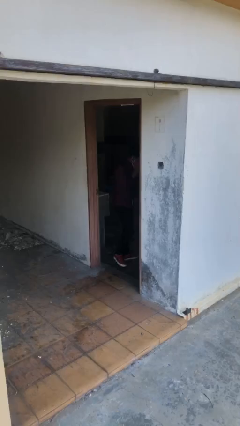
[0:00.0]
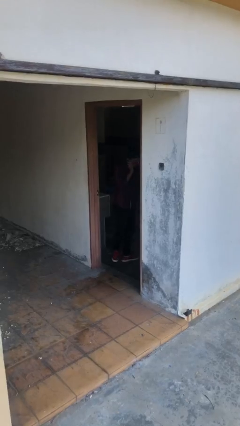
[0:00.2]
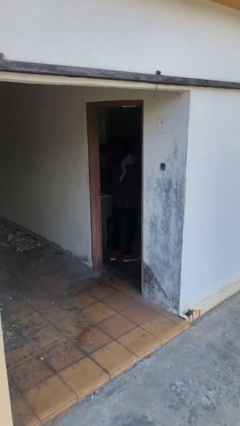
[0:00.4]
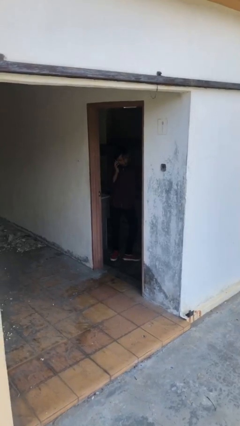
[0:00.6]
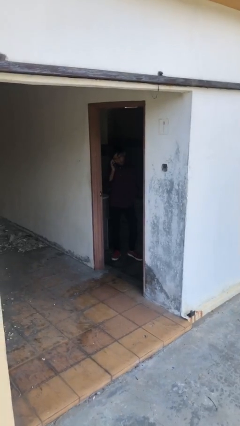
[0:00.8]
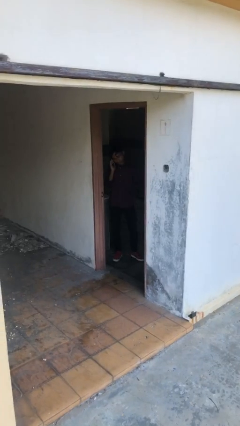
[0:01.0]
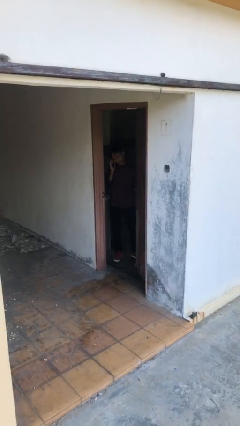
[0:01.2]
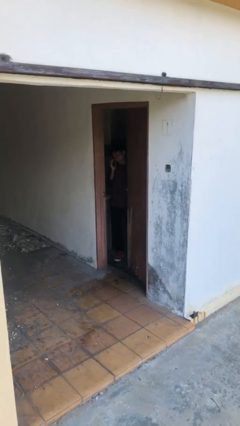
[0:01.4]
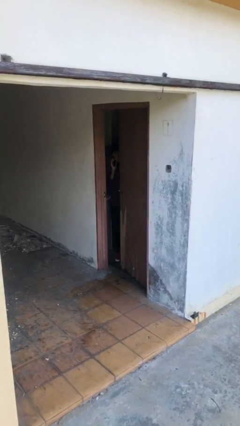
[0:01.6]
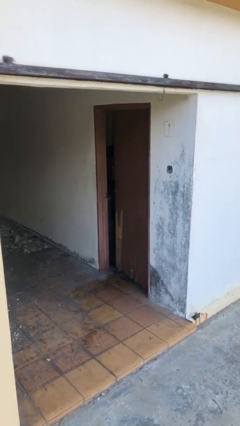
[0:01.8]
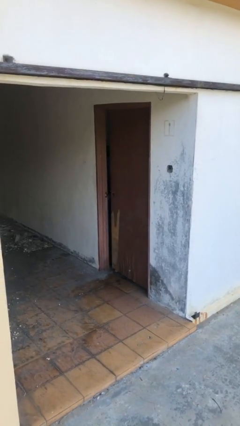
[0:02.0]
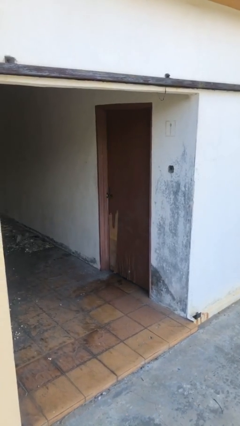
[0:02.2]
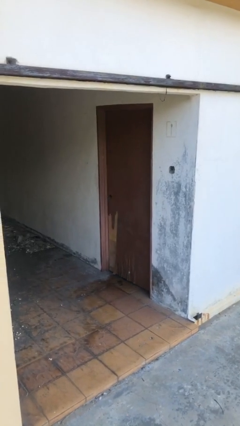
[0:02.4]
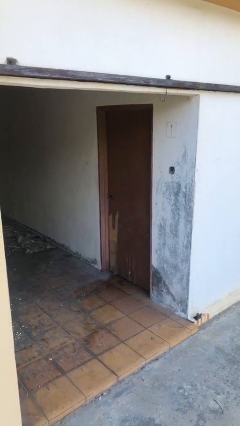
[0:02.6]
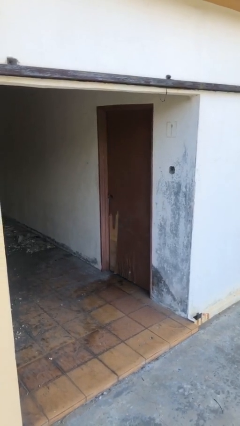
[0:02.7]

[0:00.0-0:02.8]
person closes facility door

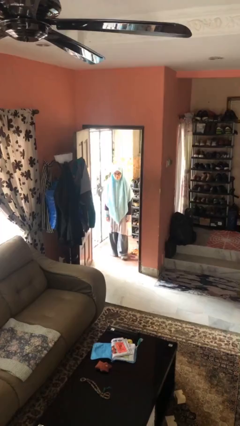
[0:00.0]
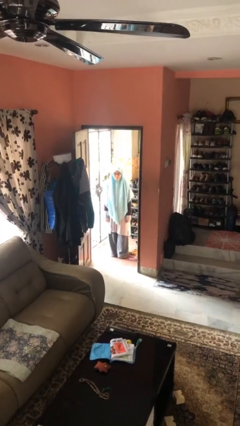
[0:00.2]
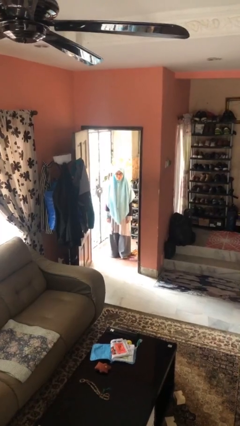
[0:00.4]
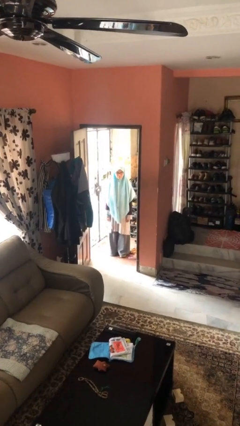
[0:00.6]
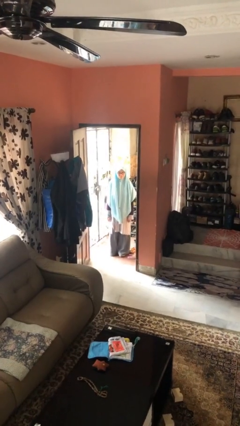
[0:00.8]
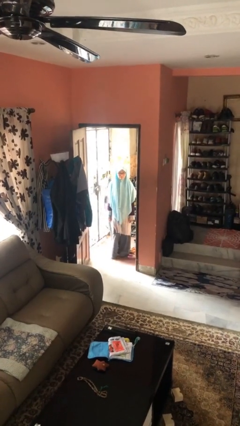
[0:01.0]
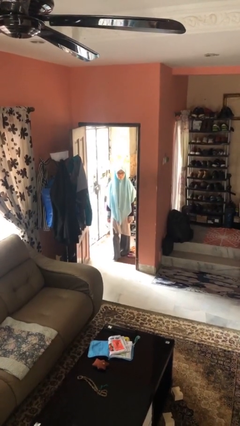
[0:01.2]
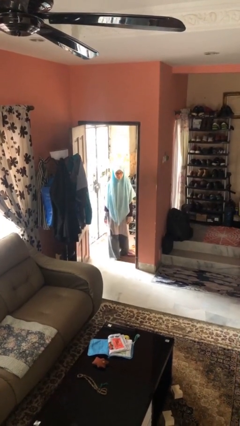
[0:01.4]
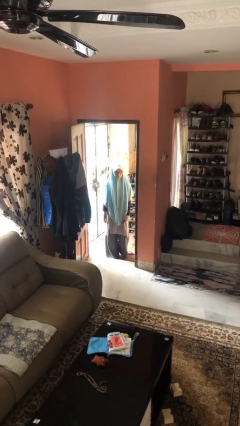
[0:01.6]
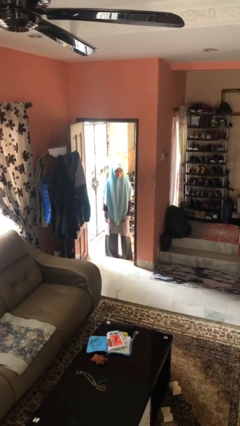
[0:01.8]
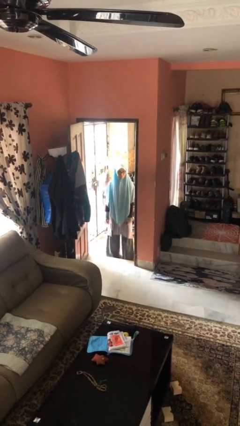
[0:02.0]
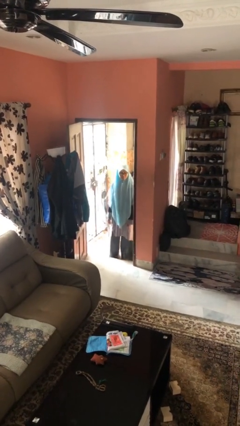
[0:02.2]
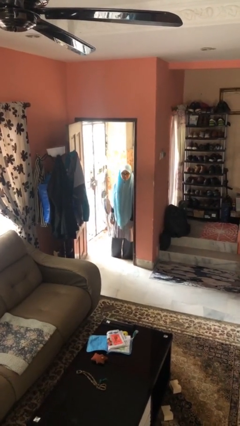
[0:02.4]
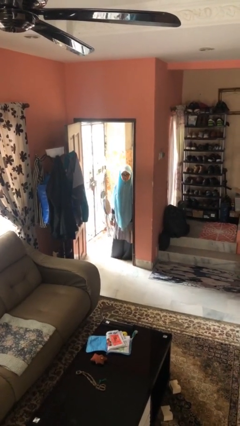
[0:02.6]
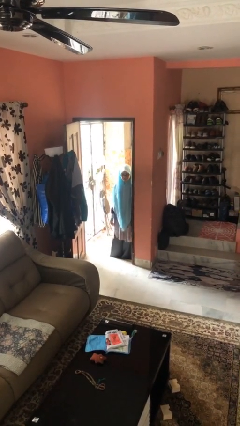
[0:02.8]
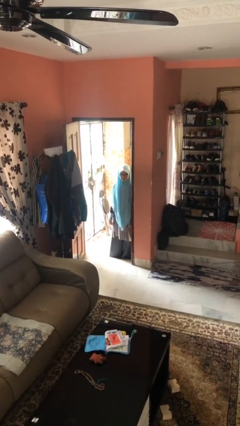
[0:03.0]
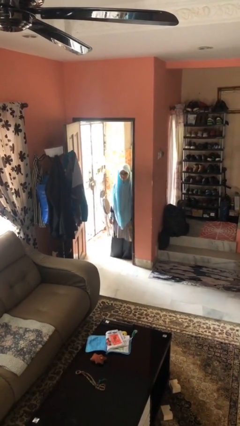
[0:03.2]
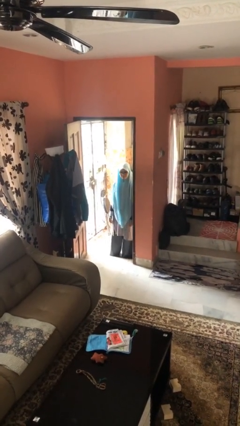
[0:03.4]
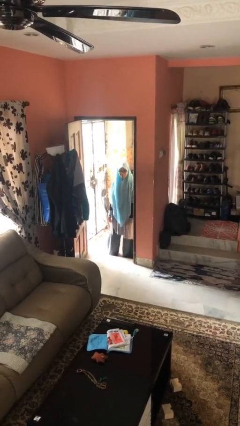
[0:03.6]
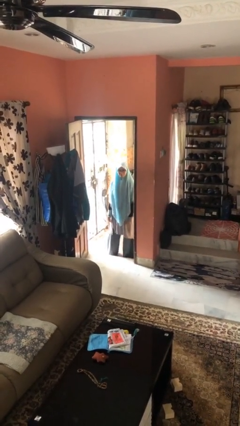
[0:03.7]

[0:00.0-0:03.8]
person bumps into wall

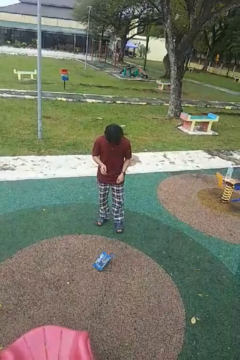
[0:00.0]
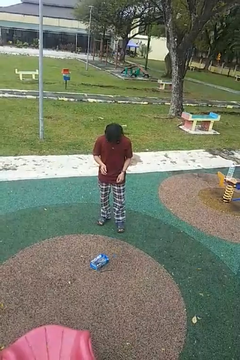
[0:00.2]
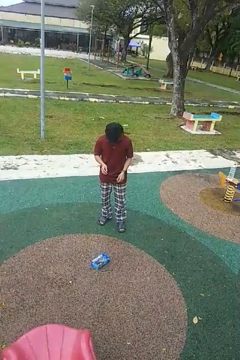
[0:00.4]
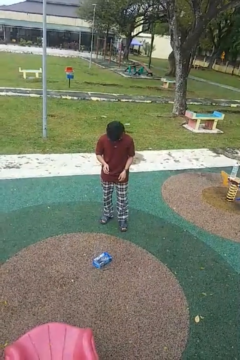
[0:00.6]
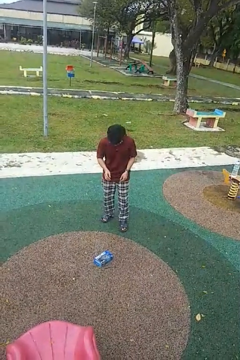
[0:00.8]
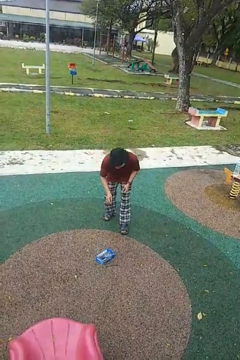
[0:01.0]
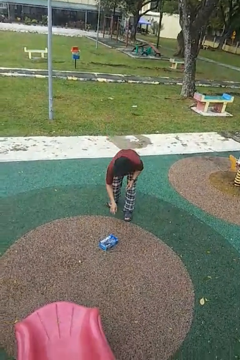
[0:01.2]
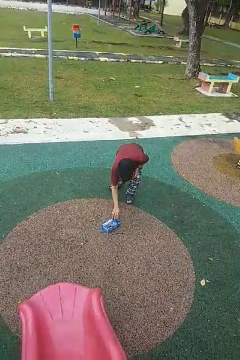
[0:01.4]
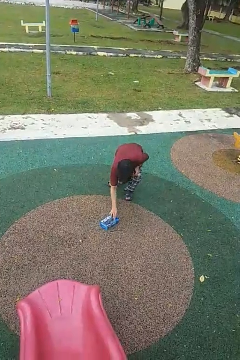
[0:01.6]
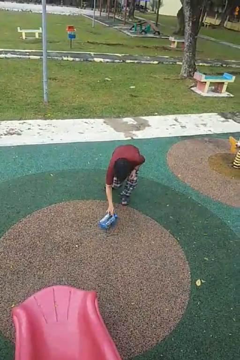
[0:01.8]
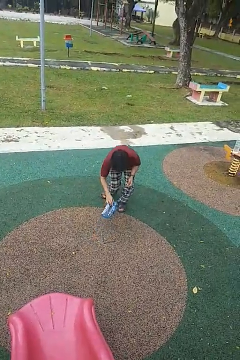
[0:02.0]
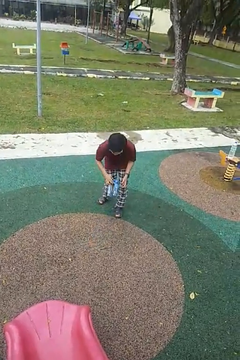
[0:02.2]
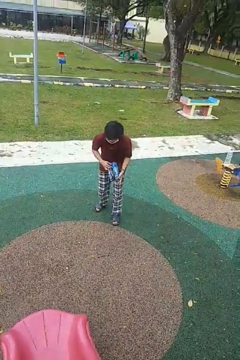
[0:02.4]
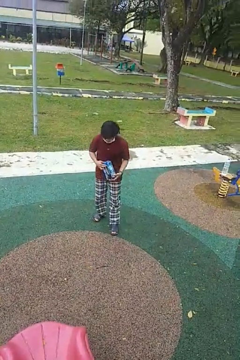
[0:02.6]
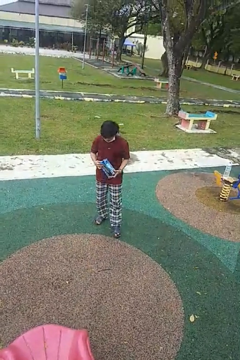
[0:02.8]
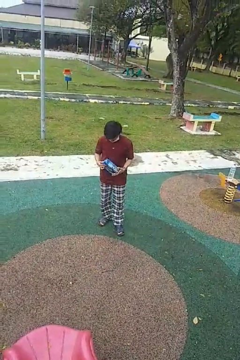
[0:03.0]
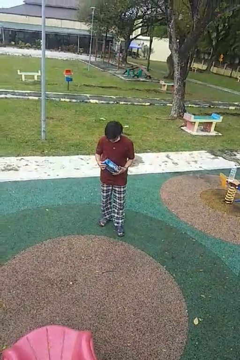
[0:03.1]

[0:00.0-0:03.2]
person picks up object from floor

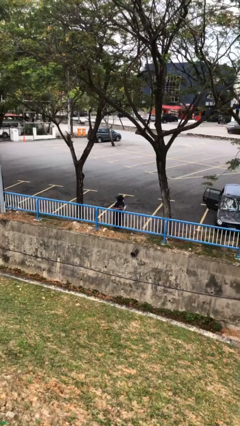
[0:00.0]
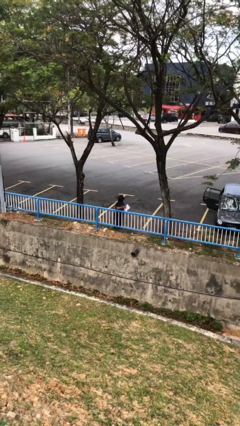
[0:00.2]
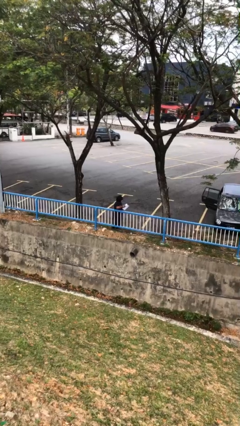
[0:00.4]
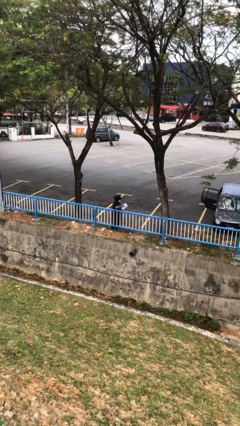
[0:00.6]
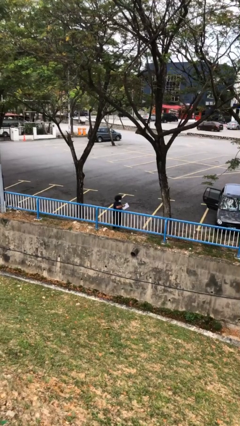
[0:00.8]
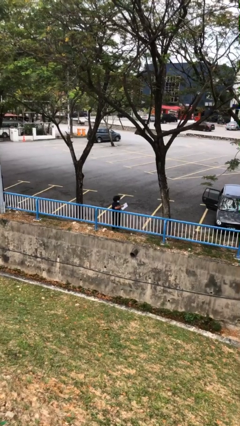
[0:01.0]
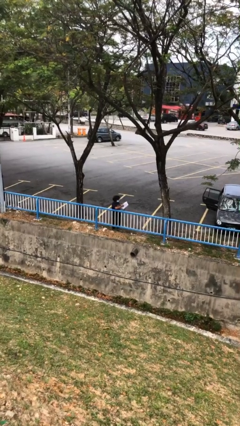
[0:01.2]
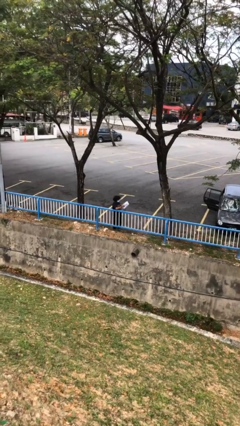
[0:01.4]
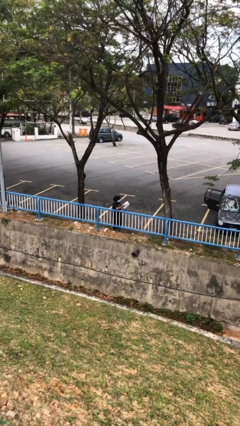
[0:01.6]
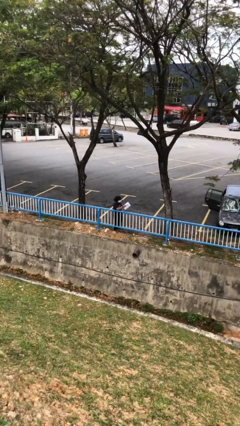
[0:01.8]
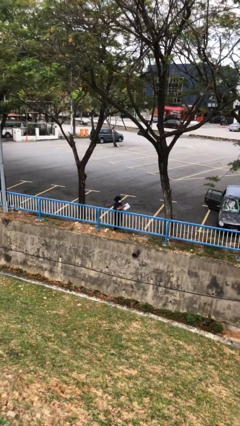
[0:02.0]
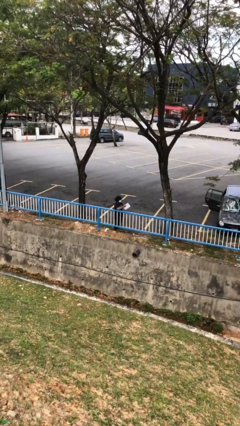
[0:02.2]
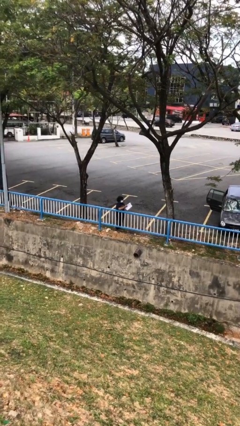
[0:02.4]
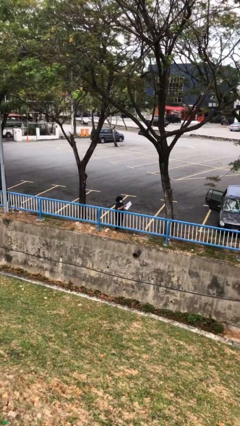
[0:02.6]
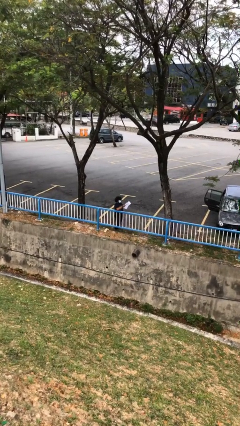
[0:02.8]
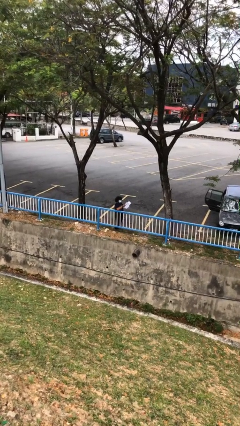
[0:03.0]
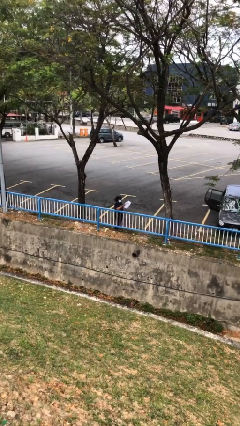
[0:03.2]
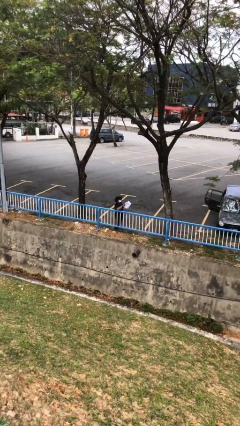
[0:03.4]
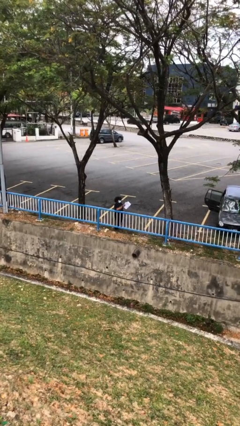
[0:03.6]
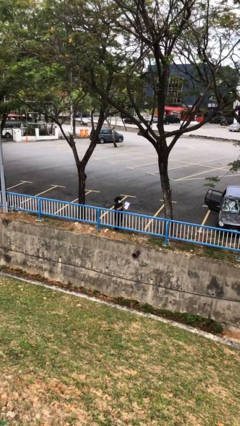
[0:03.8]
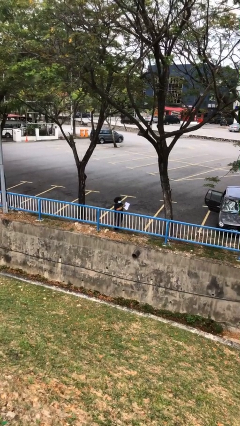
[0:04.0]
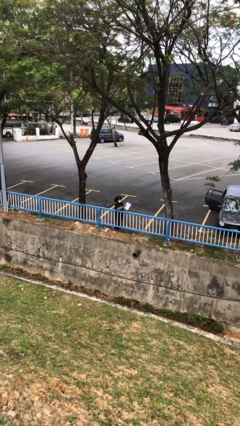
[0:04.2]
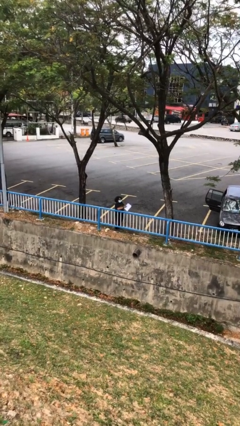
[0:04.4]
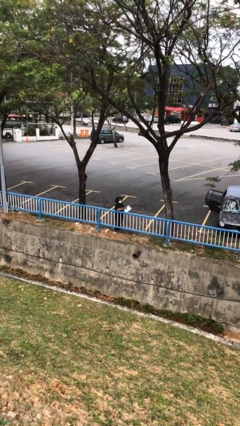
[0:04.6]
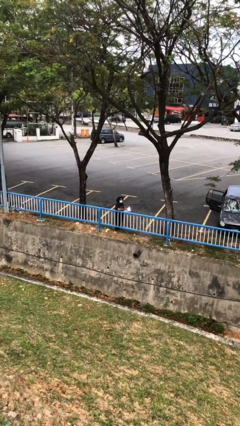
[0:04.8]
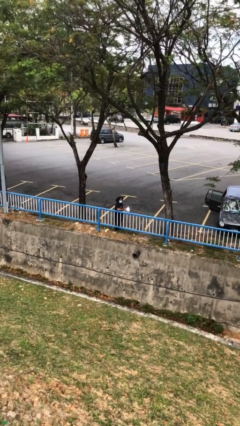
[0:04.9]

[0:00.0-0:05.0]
person reads document

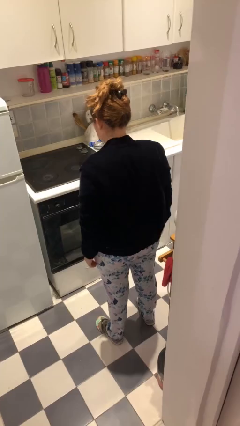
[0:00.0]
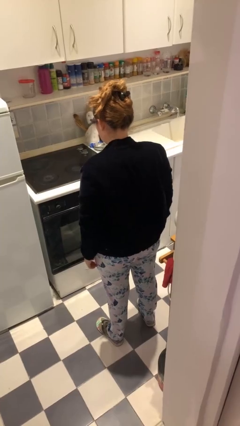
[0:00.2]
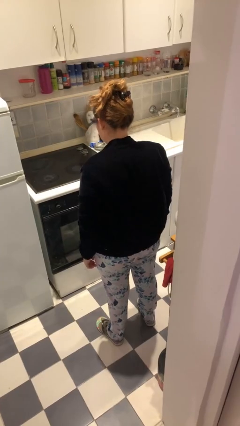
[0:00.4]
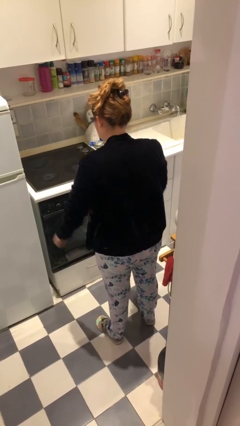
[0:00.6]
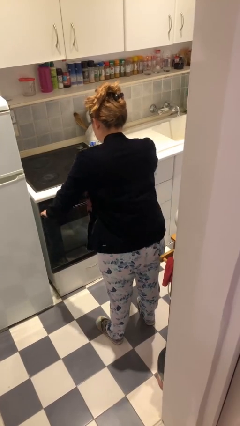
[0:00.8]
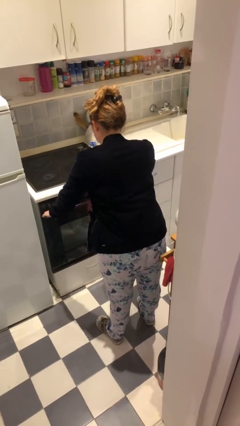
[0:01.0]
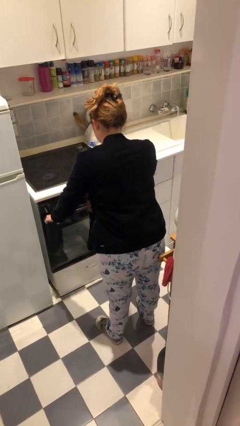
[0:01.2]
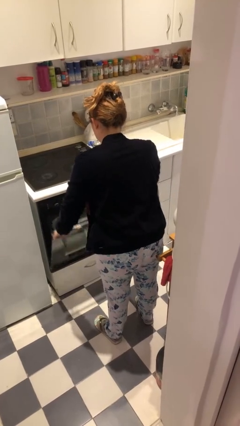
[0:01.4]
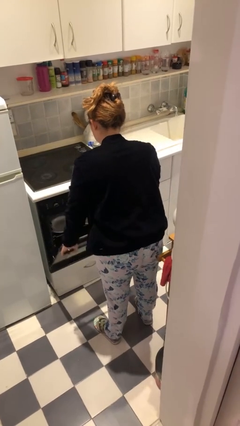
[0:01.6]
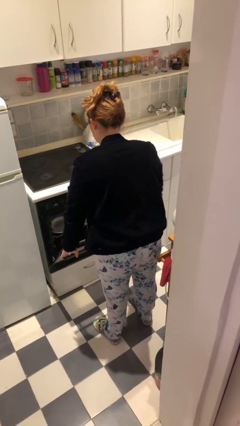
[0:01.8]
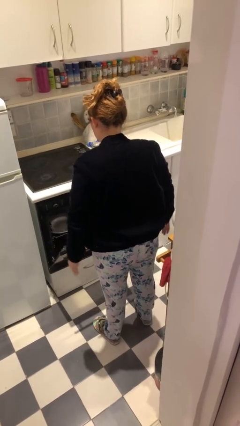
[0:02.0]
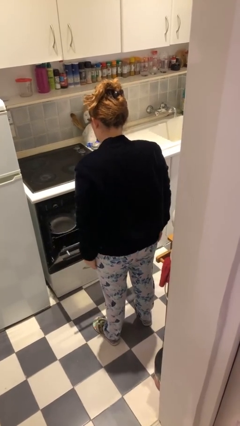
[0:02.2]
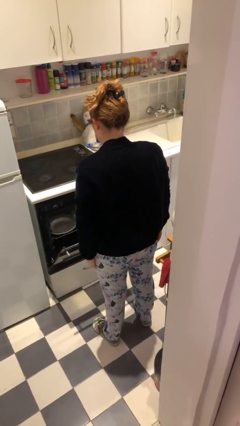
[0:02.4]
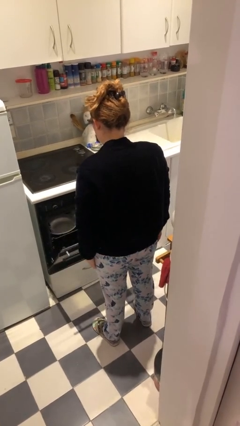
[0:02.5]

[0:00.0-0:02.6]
person opens dishwasher

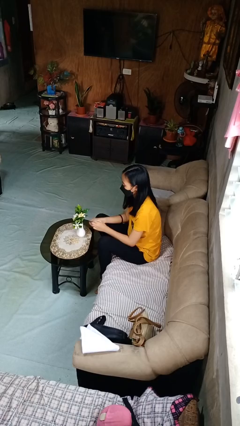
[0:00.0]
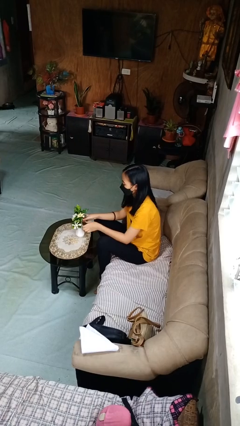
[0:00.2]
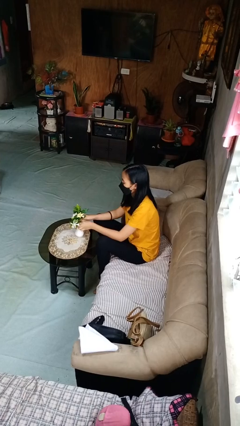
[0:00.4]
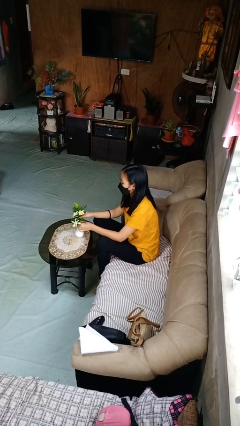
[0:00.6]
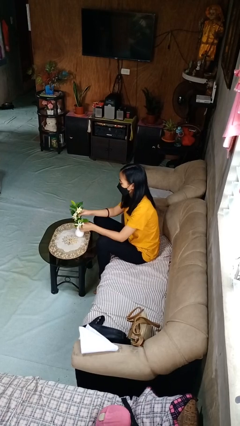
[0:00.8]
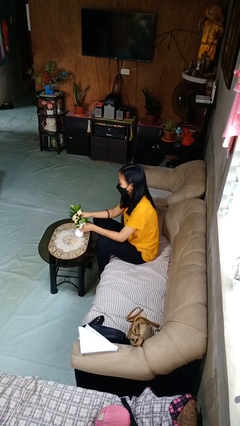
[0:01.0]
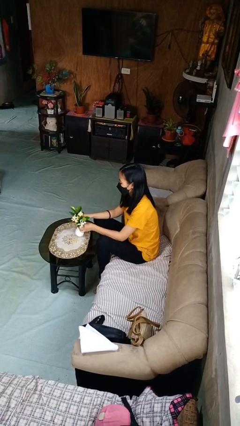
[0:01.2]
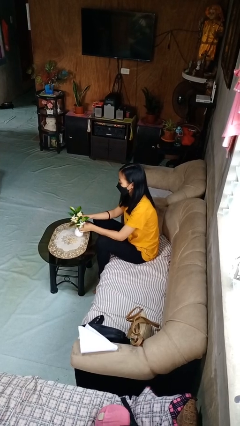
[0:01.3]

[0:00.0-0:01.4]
person arranges flowers in vase
